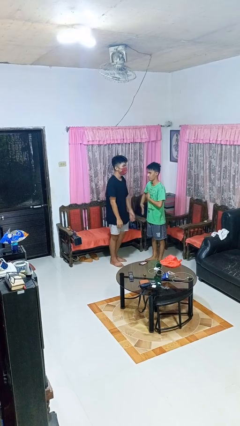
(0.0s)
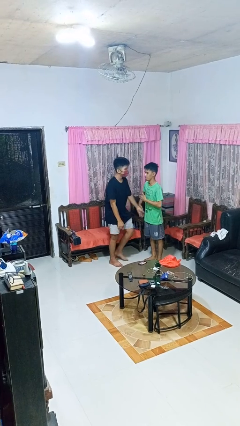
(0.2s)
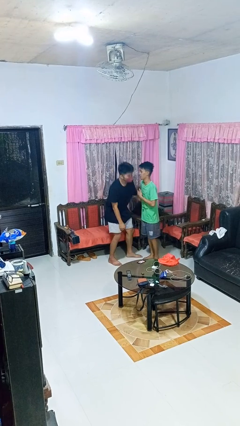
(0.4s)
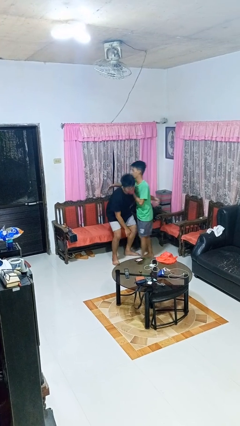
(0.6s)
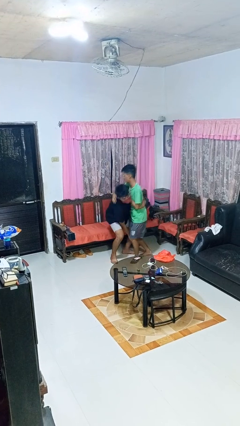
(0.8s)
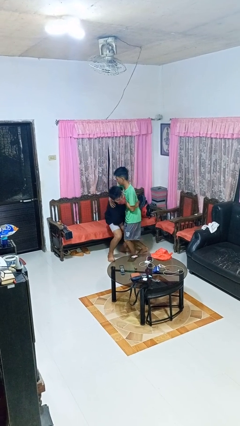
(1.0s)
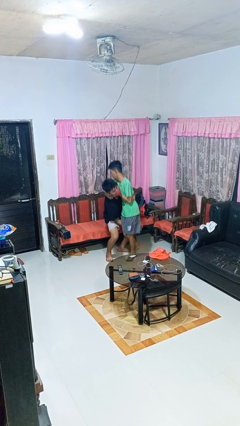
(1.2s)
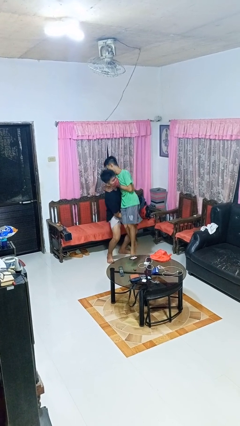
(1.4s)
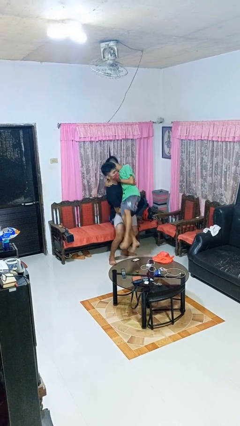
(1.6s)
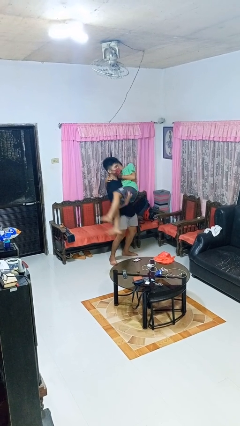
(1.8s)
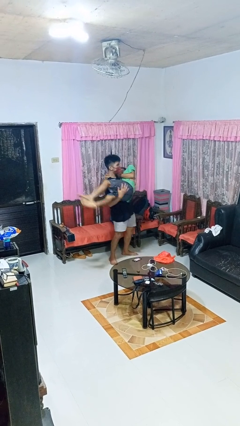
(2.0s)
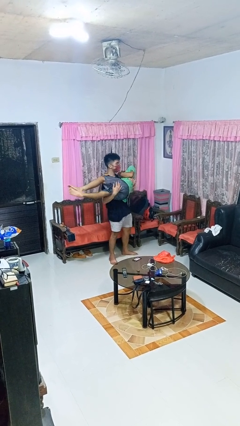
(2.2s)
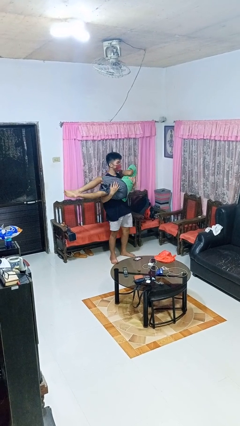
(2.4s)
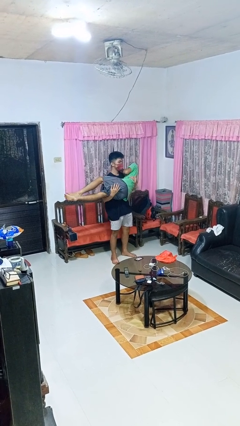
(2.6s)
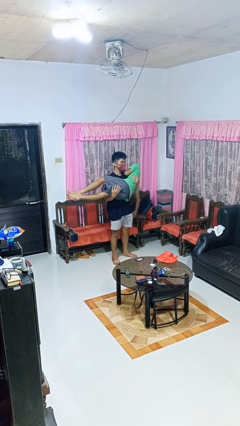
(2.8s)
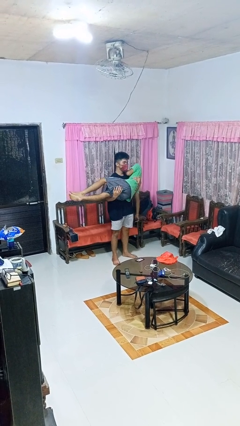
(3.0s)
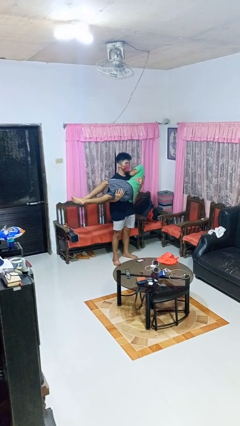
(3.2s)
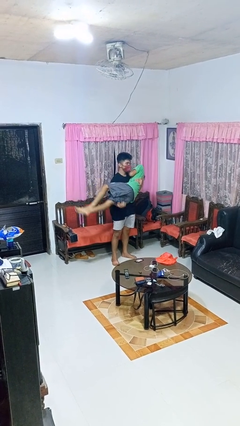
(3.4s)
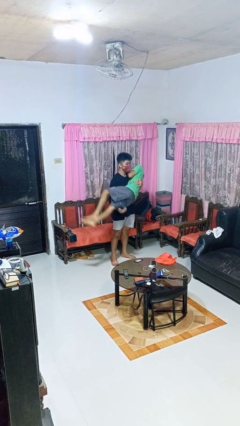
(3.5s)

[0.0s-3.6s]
person picks up person

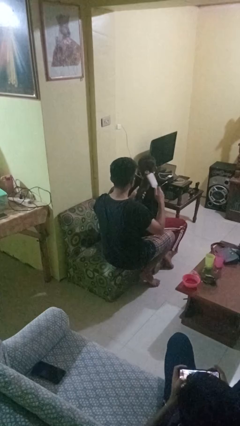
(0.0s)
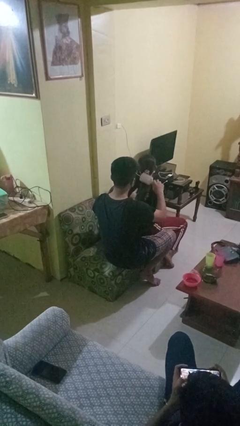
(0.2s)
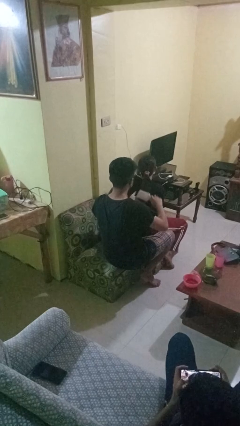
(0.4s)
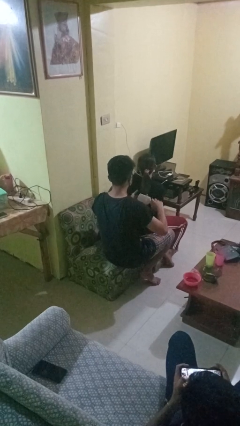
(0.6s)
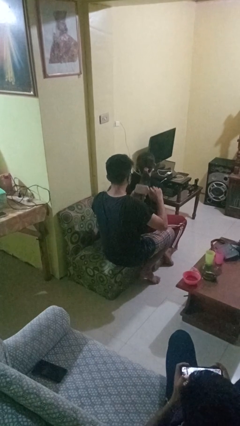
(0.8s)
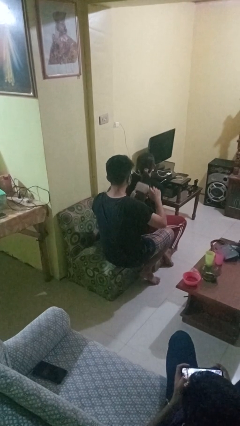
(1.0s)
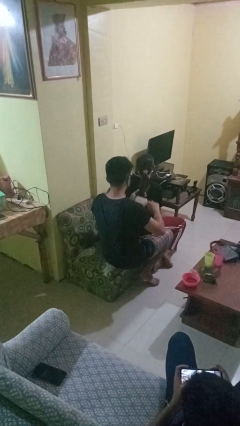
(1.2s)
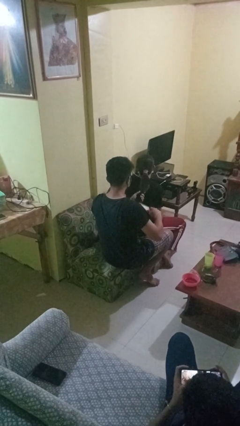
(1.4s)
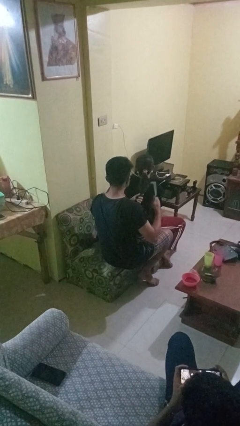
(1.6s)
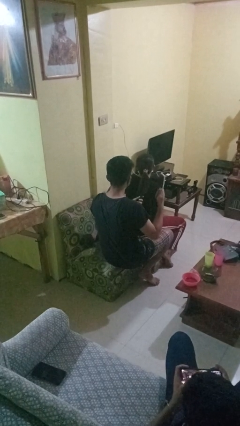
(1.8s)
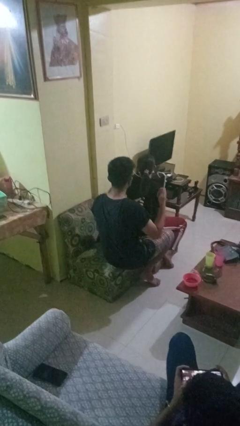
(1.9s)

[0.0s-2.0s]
person brushes hair of person

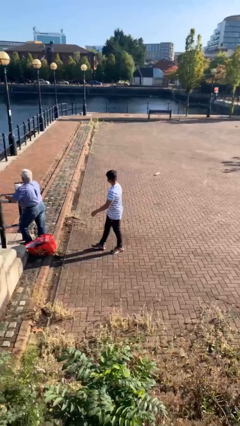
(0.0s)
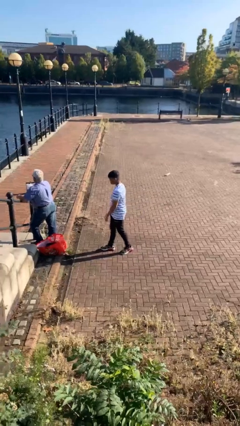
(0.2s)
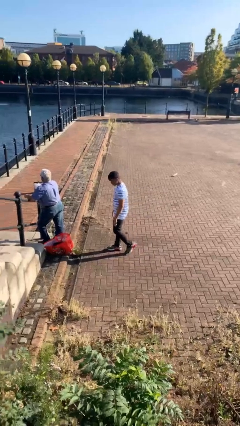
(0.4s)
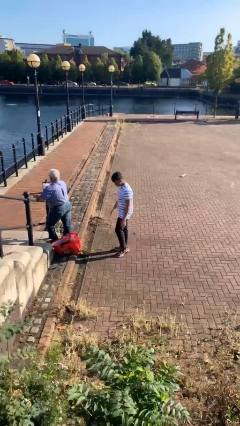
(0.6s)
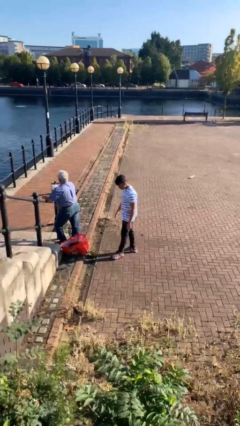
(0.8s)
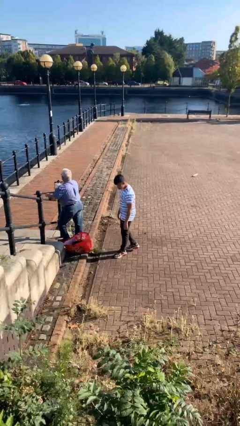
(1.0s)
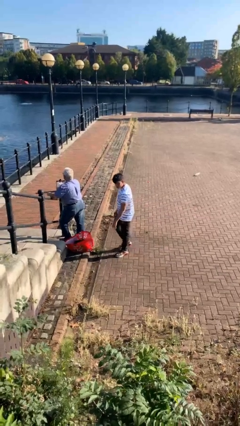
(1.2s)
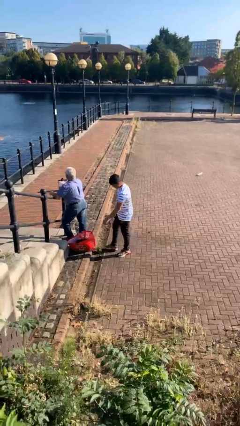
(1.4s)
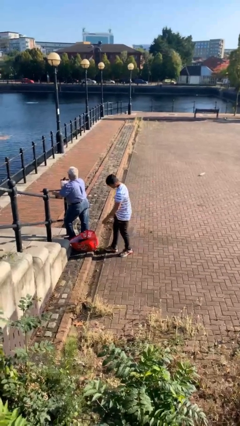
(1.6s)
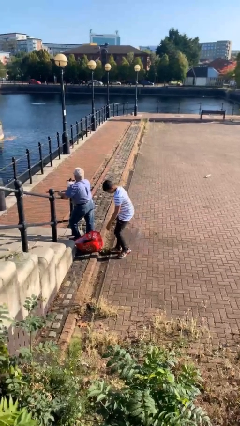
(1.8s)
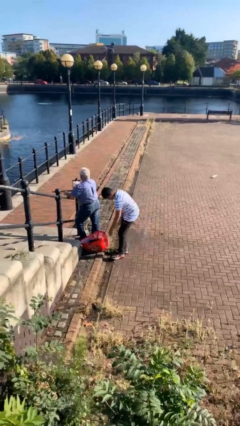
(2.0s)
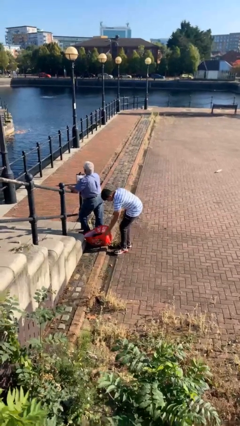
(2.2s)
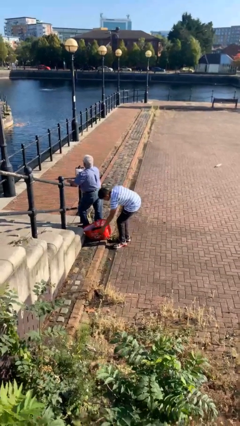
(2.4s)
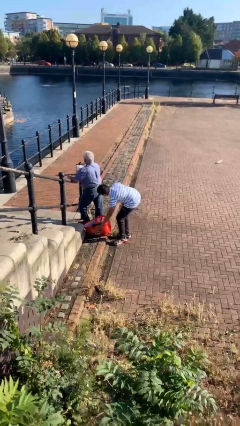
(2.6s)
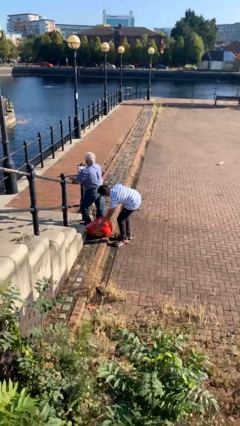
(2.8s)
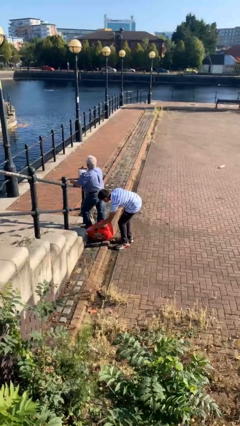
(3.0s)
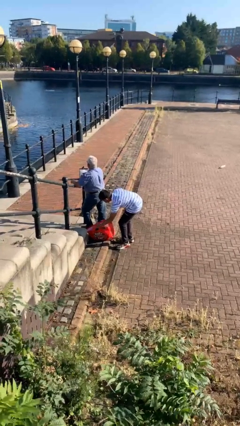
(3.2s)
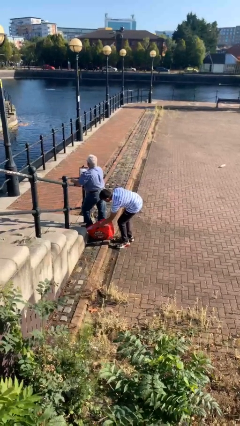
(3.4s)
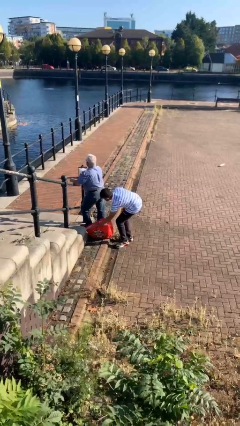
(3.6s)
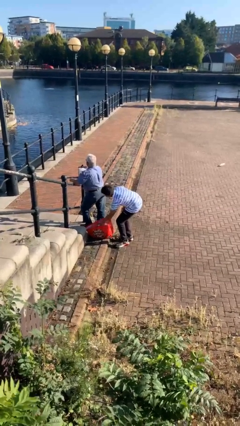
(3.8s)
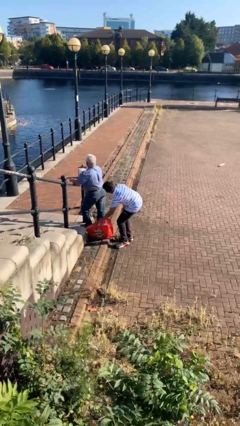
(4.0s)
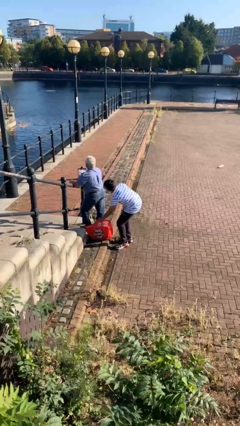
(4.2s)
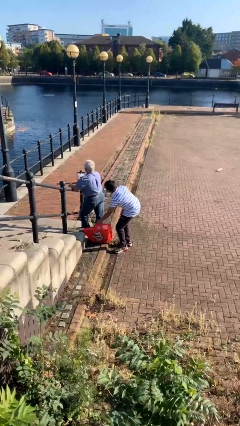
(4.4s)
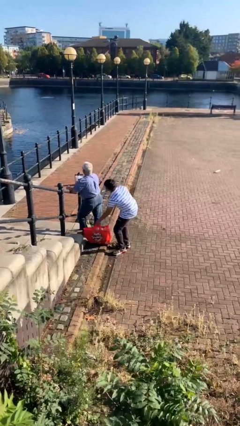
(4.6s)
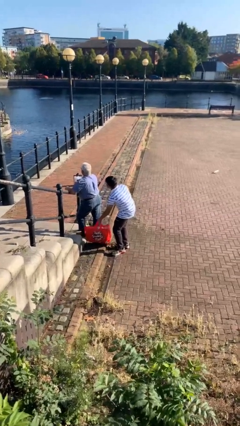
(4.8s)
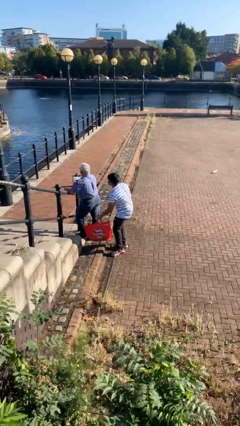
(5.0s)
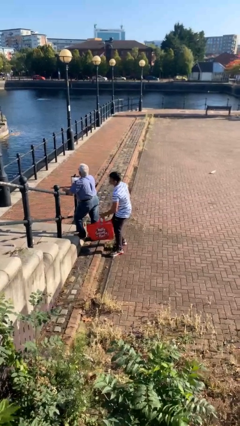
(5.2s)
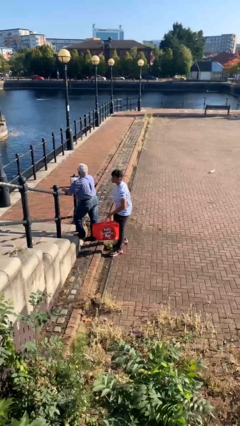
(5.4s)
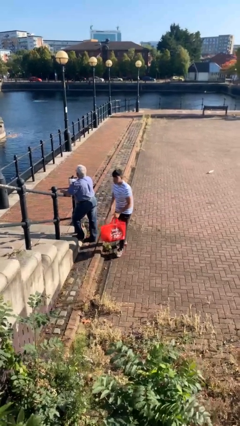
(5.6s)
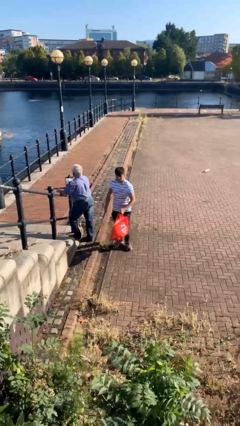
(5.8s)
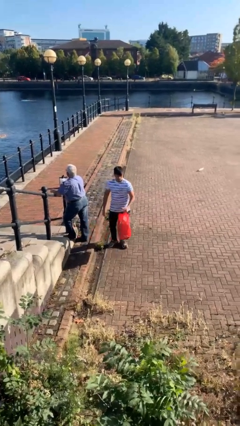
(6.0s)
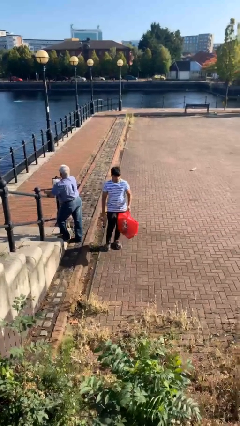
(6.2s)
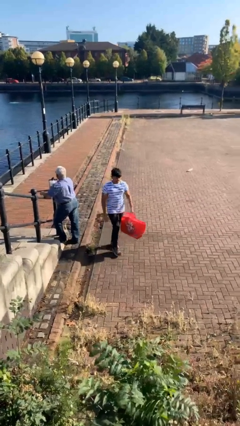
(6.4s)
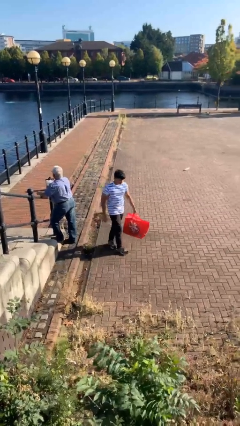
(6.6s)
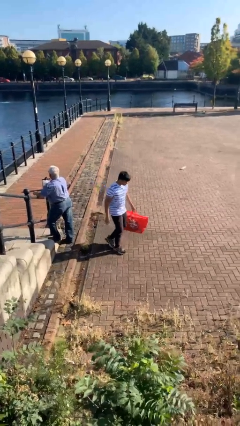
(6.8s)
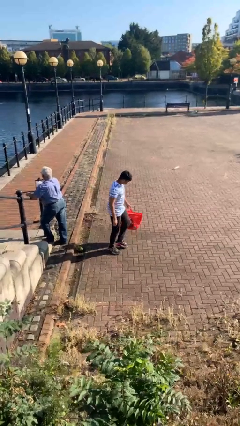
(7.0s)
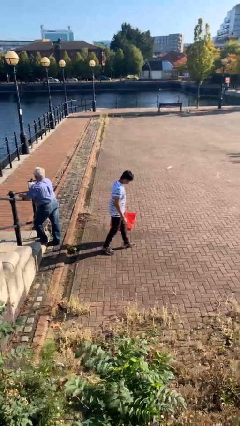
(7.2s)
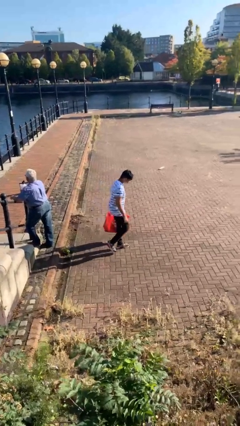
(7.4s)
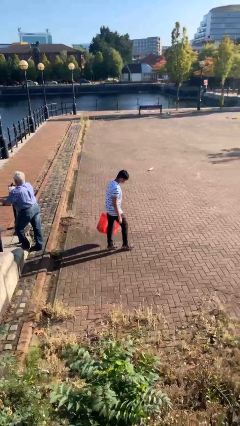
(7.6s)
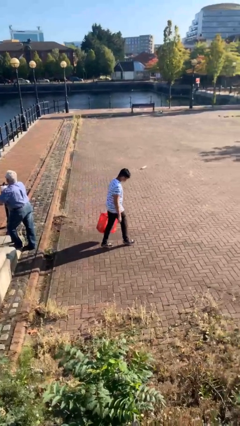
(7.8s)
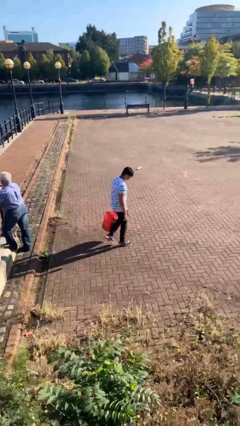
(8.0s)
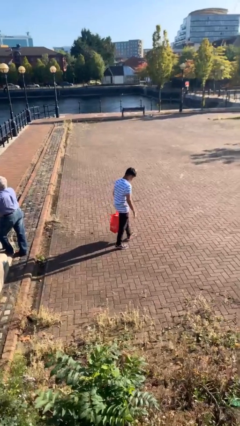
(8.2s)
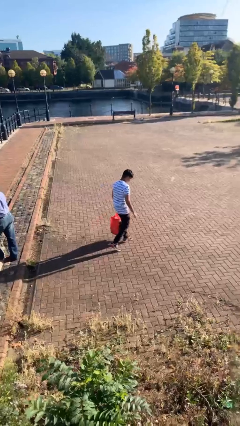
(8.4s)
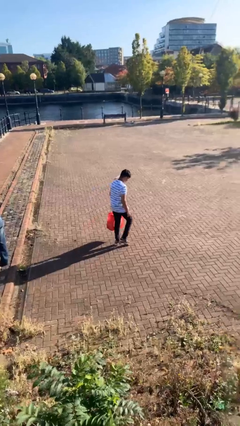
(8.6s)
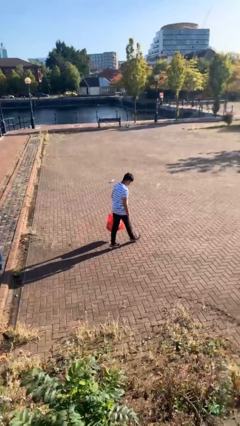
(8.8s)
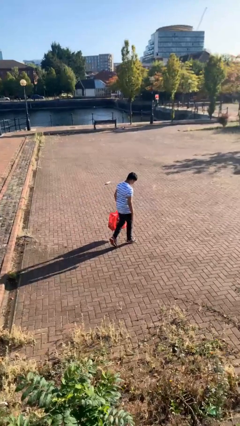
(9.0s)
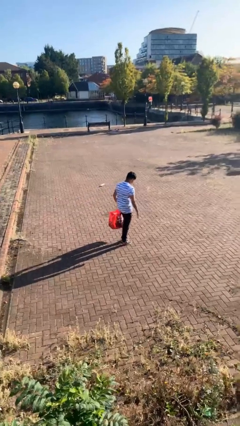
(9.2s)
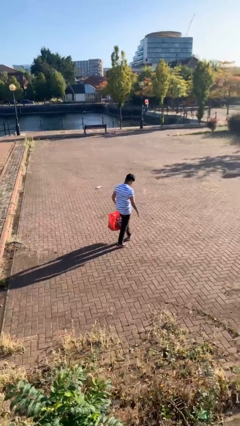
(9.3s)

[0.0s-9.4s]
person steals object from person

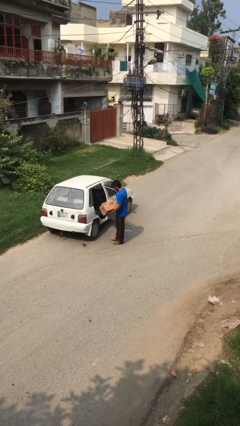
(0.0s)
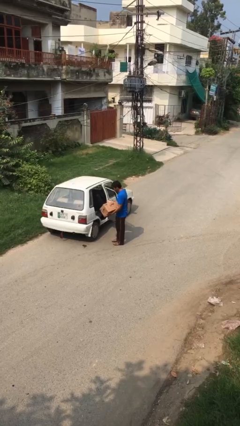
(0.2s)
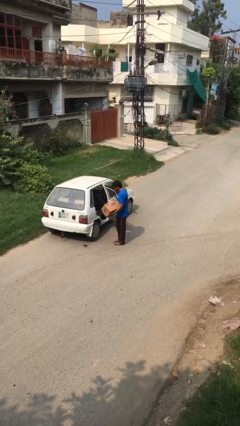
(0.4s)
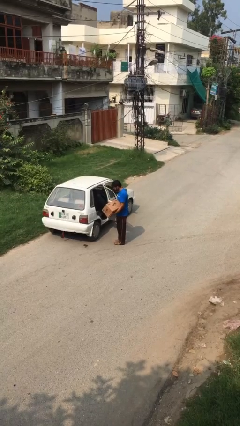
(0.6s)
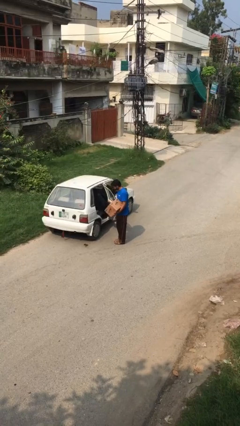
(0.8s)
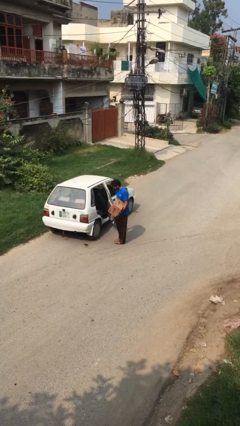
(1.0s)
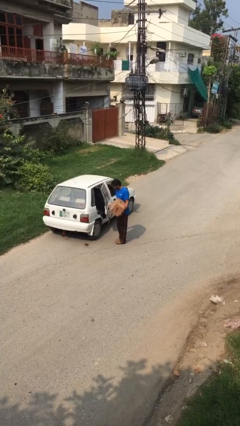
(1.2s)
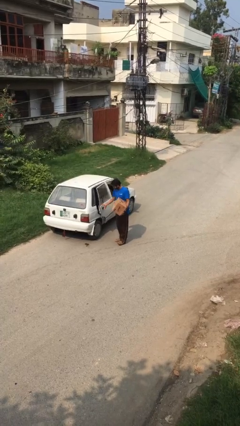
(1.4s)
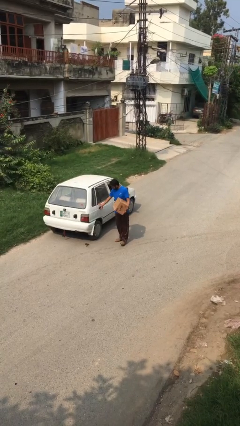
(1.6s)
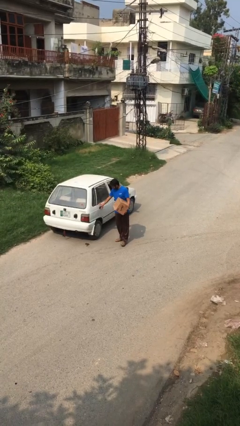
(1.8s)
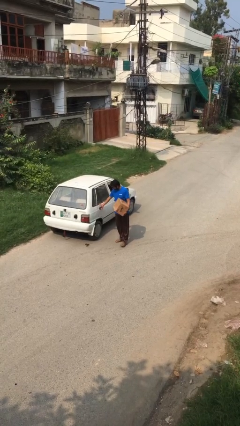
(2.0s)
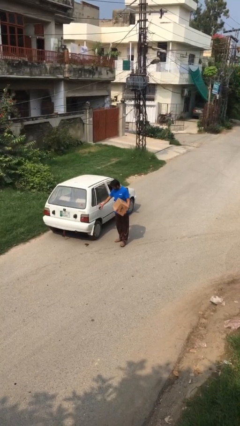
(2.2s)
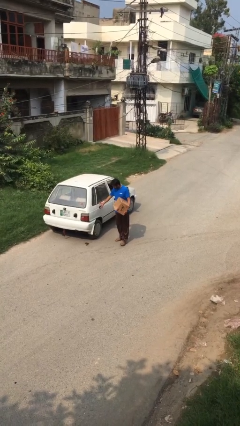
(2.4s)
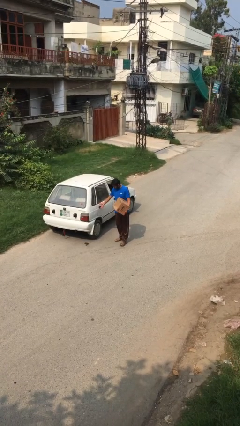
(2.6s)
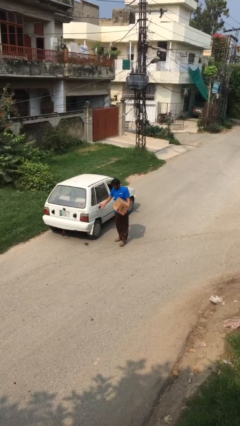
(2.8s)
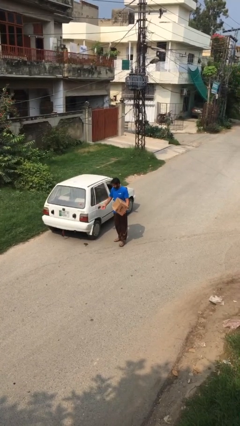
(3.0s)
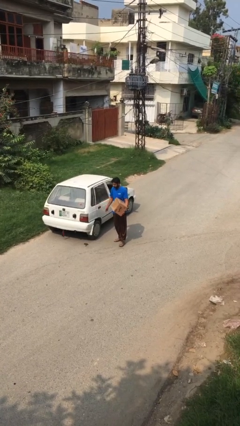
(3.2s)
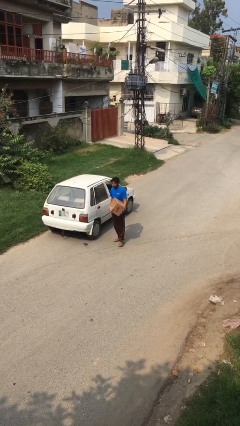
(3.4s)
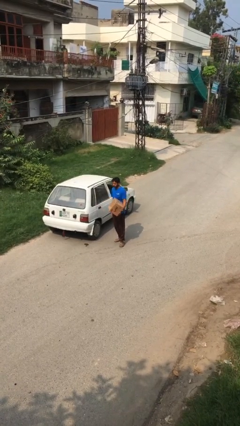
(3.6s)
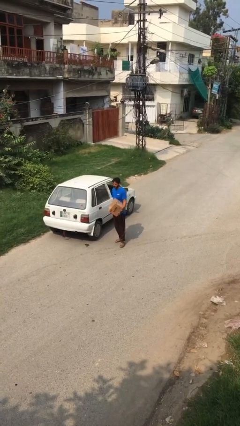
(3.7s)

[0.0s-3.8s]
person closes car door
